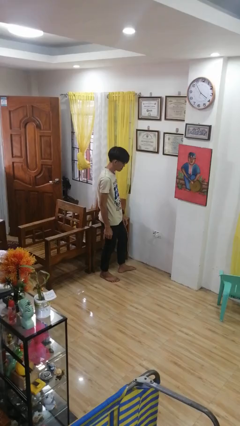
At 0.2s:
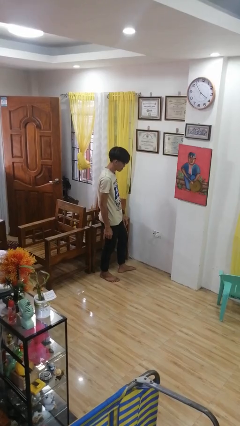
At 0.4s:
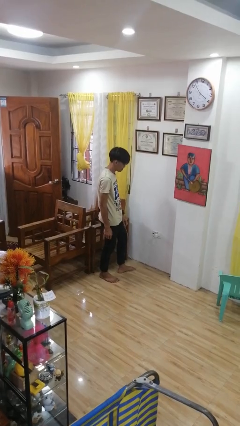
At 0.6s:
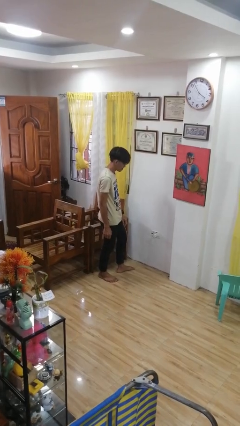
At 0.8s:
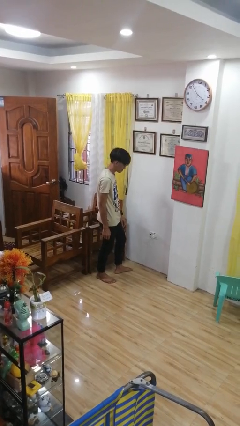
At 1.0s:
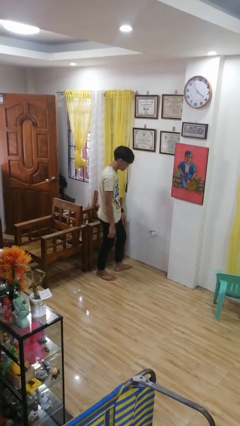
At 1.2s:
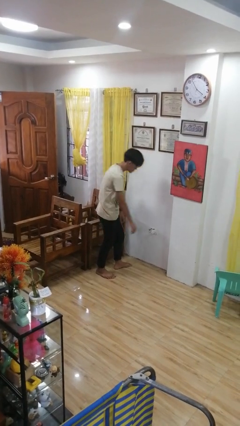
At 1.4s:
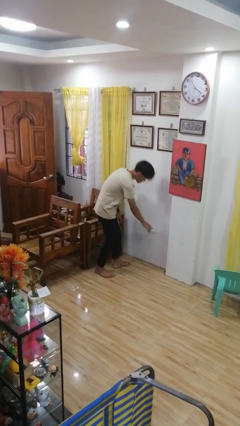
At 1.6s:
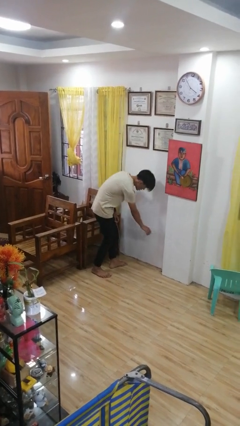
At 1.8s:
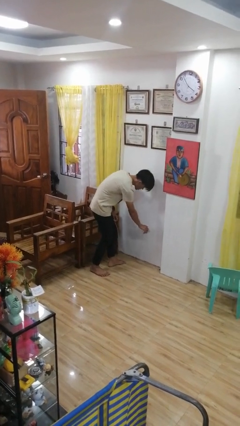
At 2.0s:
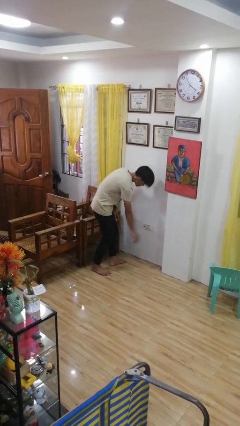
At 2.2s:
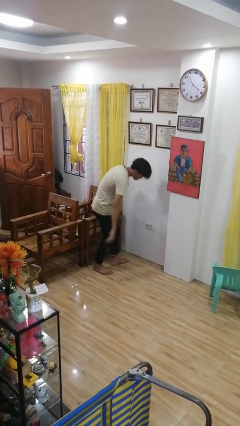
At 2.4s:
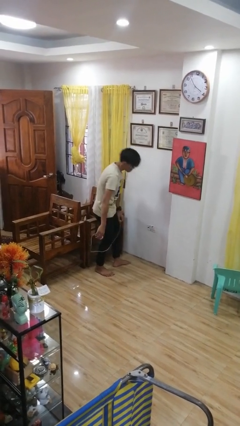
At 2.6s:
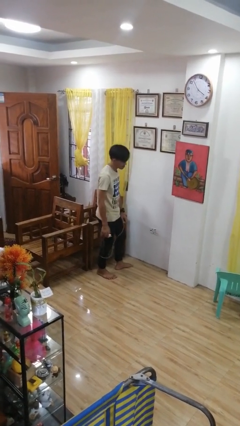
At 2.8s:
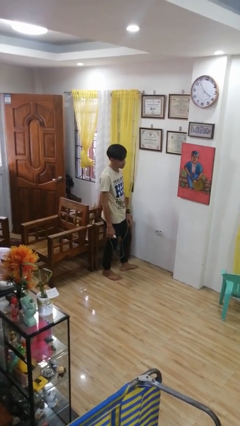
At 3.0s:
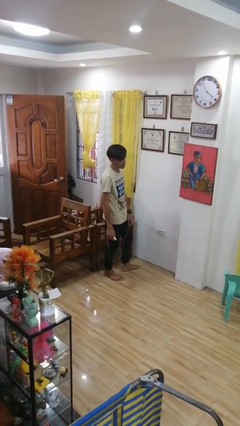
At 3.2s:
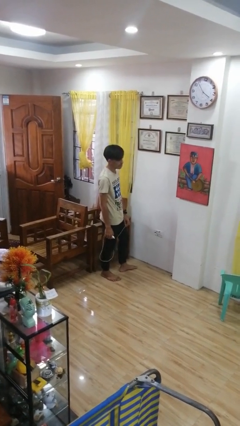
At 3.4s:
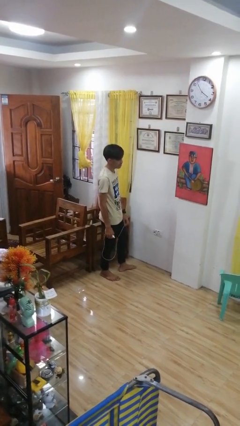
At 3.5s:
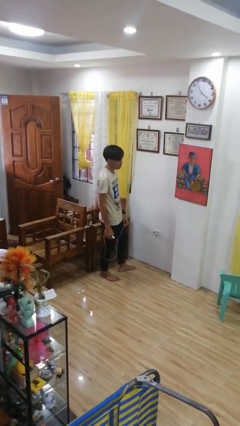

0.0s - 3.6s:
person unplugs from electrical socket

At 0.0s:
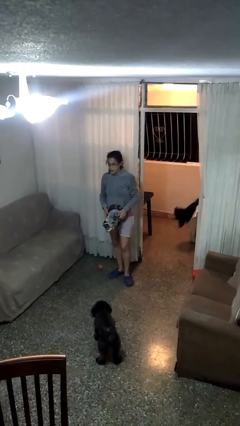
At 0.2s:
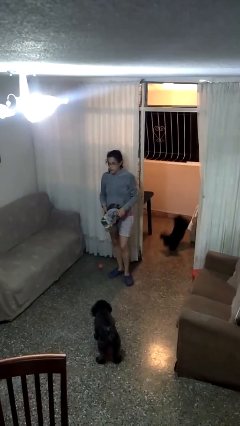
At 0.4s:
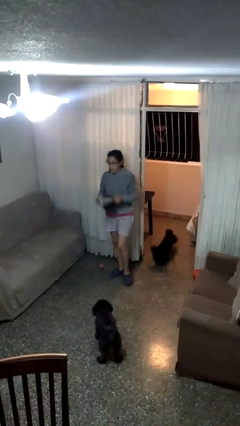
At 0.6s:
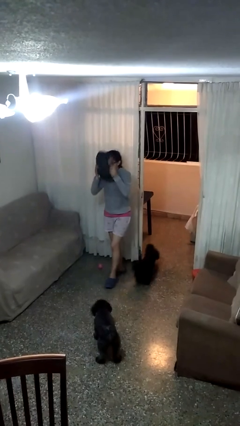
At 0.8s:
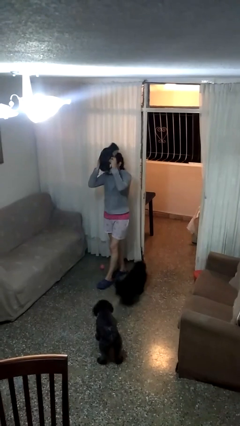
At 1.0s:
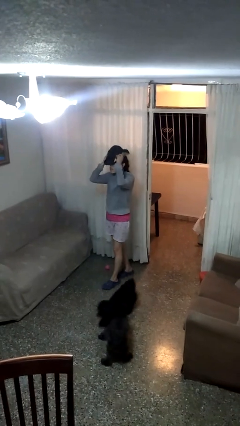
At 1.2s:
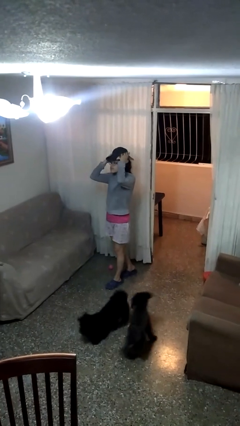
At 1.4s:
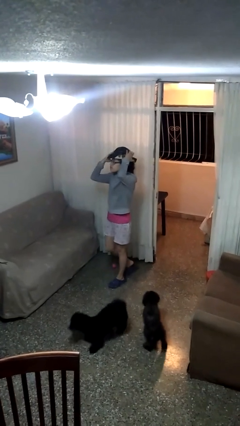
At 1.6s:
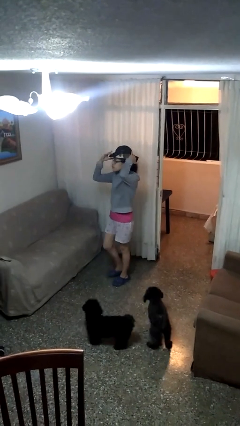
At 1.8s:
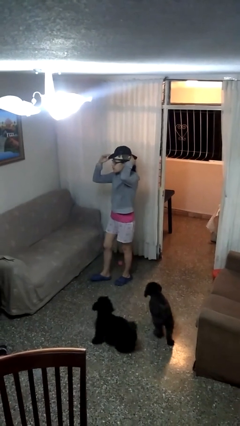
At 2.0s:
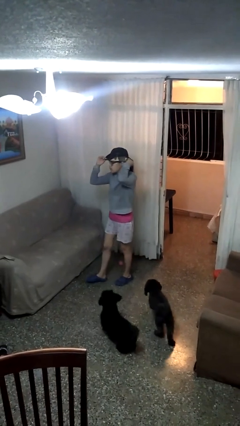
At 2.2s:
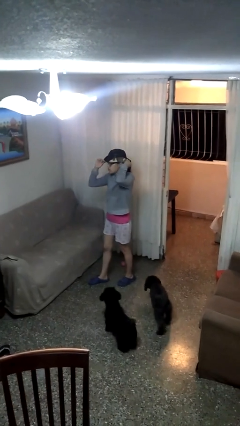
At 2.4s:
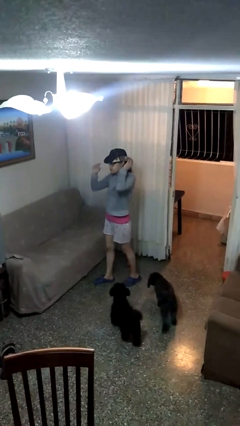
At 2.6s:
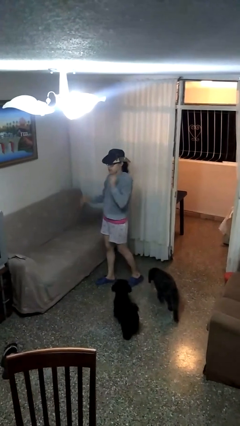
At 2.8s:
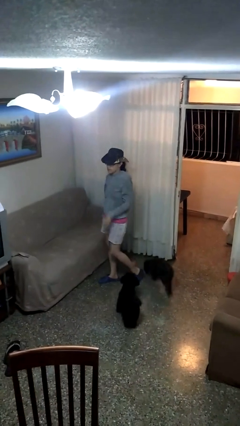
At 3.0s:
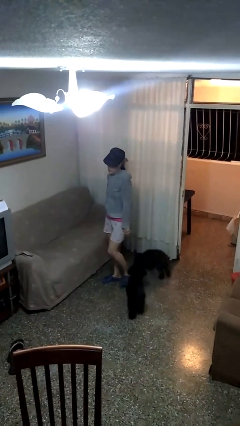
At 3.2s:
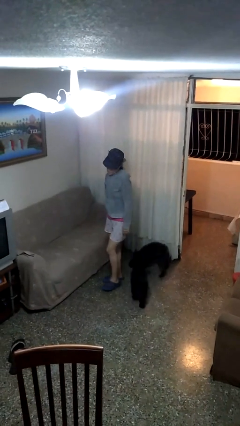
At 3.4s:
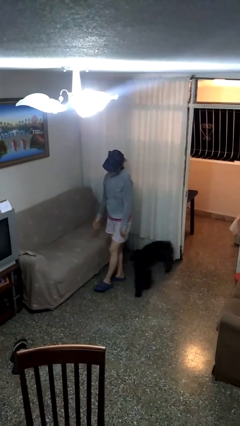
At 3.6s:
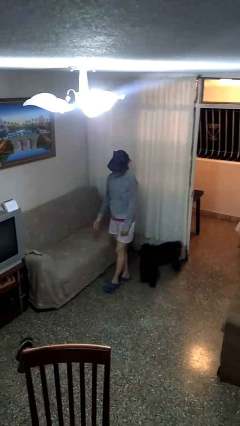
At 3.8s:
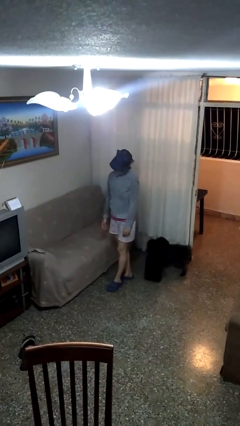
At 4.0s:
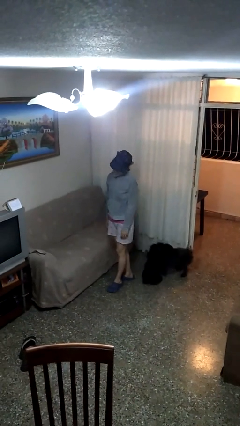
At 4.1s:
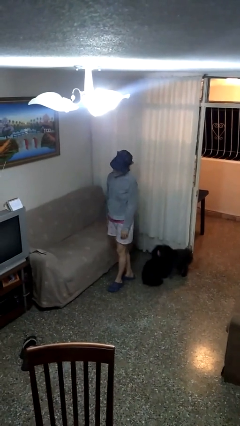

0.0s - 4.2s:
person puts on hat

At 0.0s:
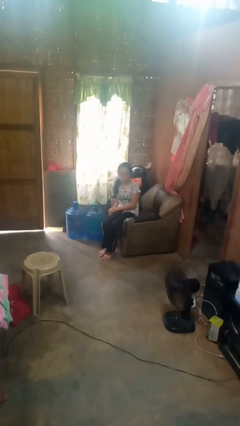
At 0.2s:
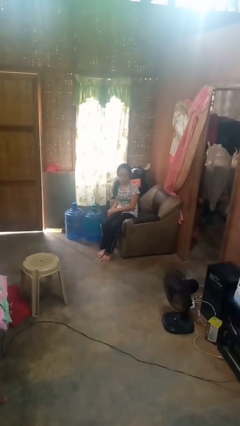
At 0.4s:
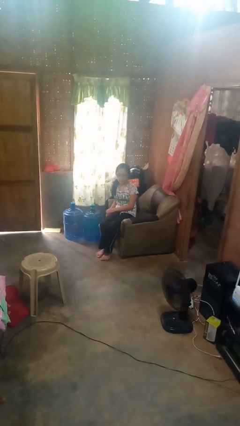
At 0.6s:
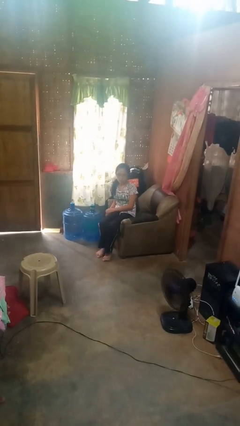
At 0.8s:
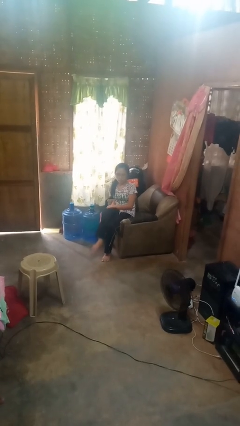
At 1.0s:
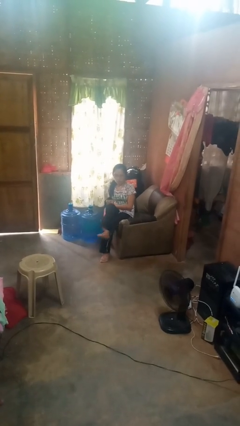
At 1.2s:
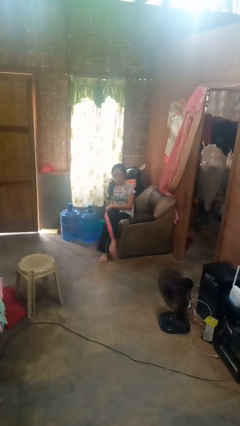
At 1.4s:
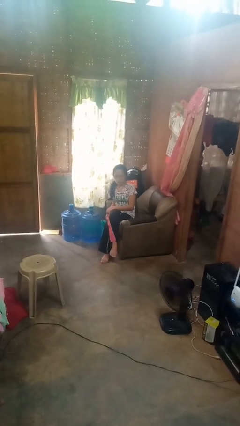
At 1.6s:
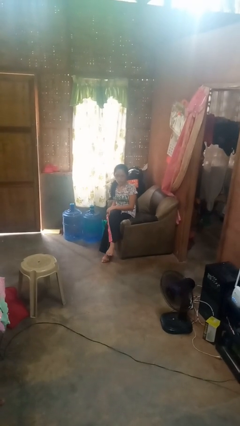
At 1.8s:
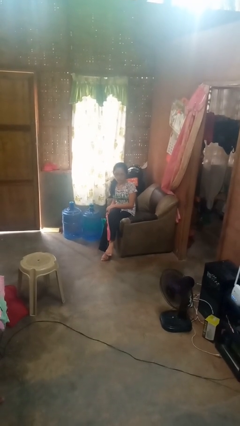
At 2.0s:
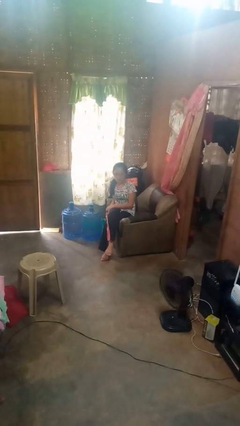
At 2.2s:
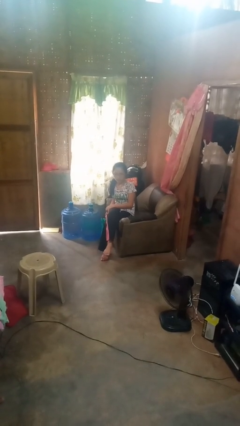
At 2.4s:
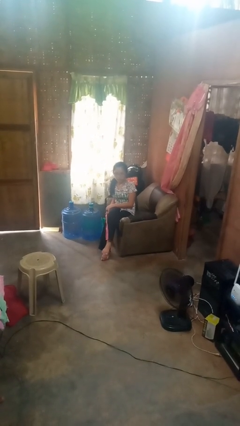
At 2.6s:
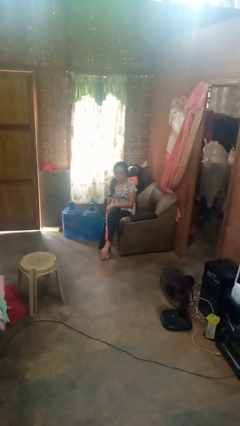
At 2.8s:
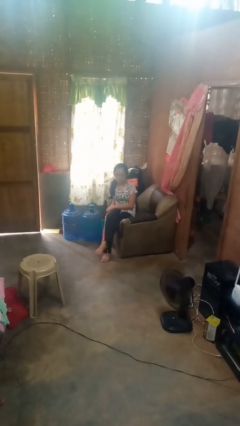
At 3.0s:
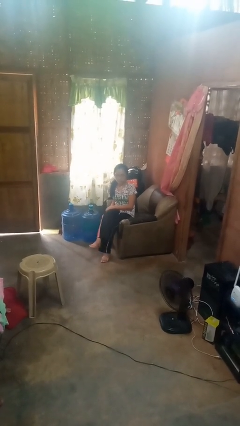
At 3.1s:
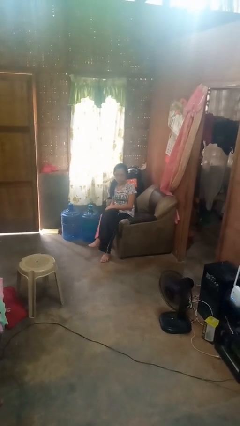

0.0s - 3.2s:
person crosses legs

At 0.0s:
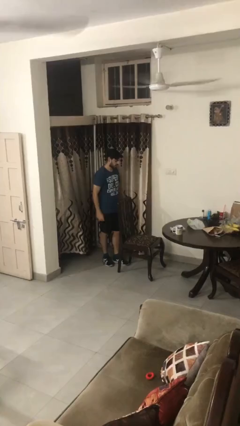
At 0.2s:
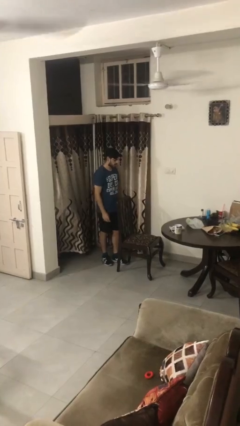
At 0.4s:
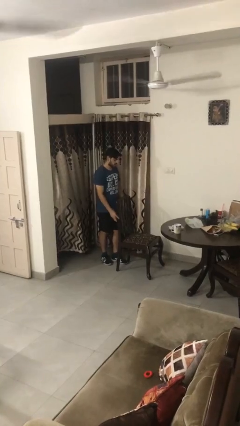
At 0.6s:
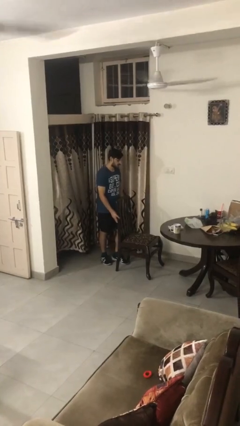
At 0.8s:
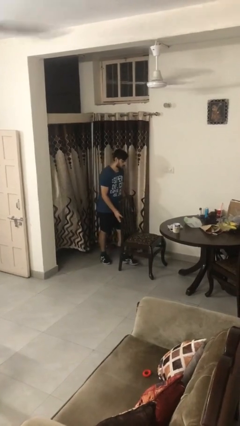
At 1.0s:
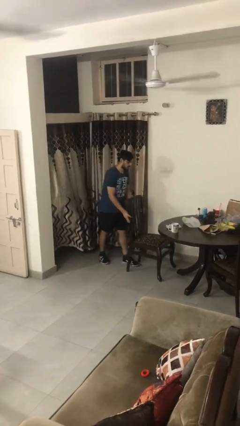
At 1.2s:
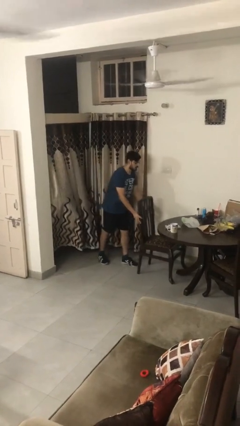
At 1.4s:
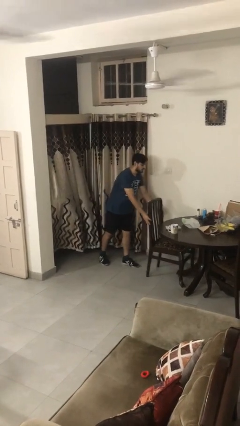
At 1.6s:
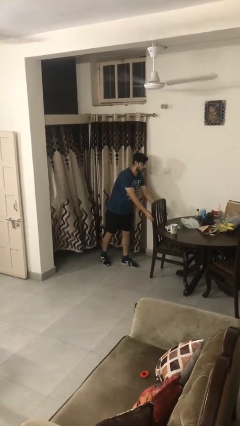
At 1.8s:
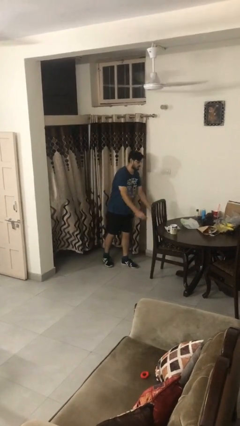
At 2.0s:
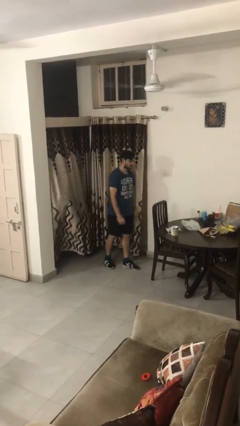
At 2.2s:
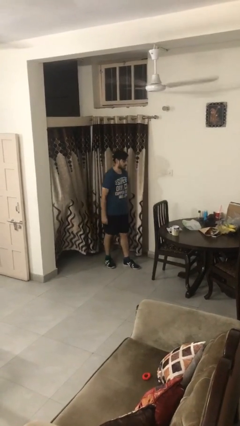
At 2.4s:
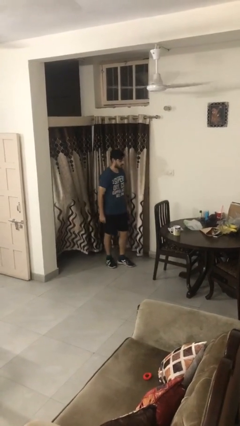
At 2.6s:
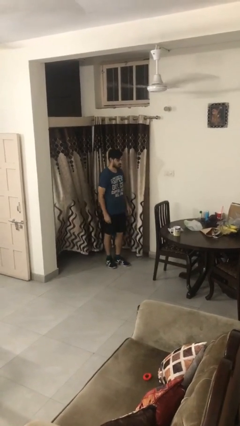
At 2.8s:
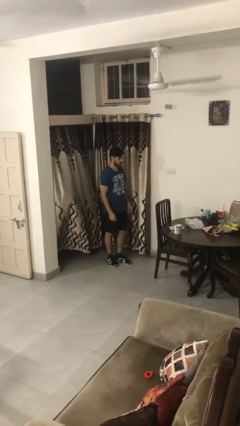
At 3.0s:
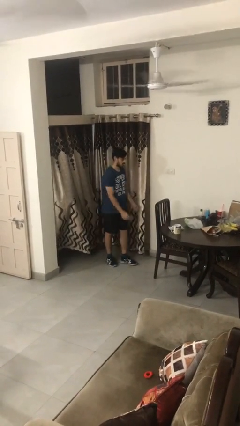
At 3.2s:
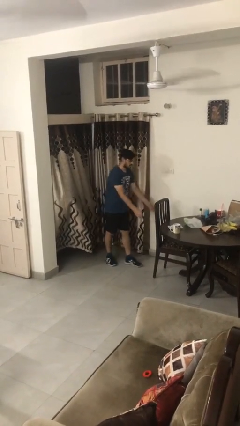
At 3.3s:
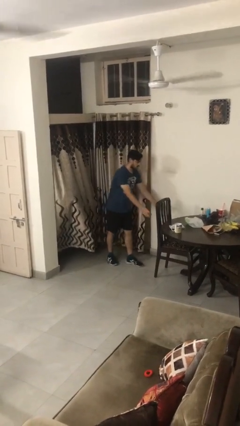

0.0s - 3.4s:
person pushes in chair

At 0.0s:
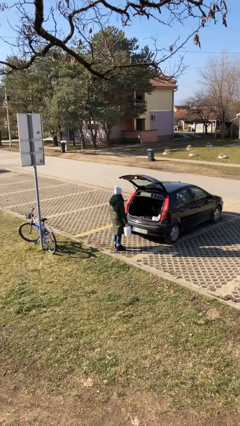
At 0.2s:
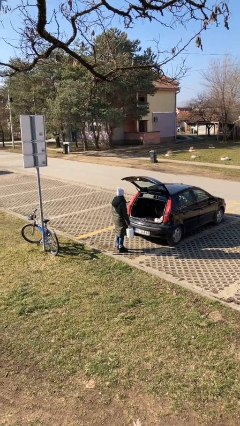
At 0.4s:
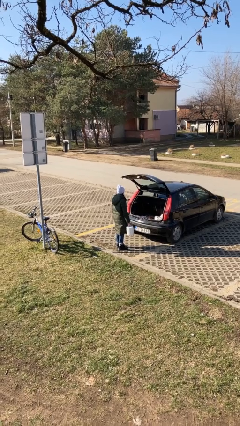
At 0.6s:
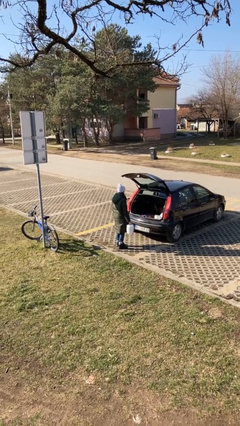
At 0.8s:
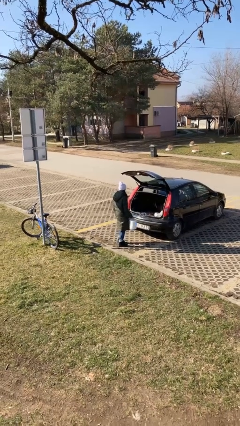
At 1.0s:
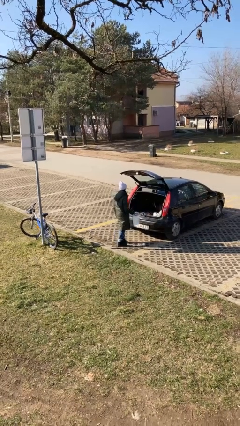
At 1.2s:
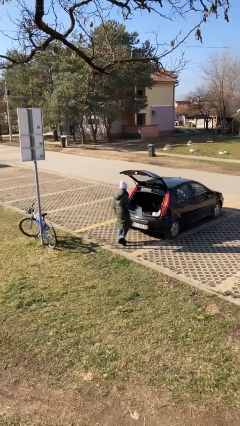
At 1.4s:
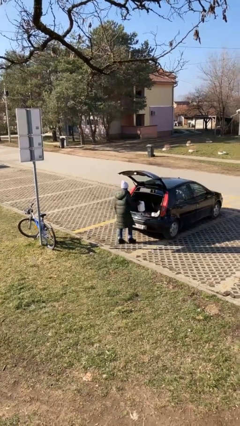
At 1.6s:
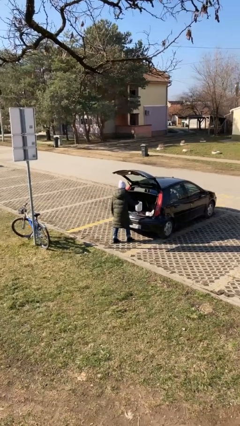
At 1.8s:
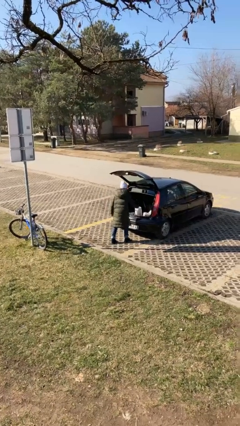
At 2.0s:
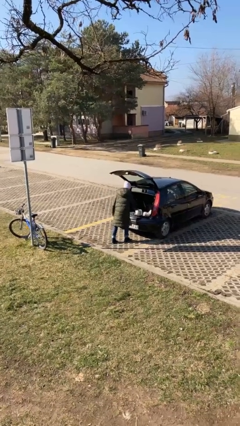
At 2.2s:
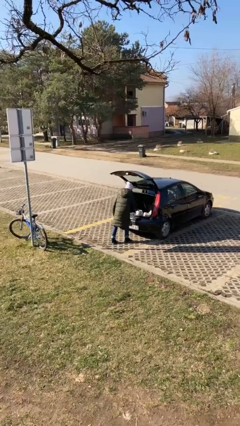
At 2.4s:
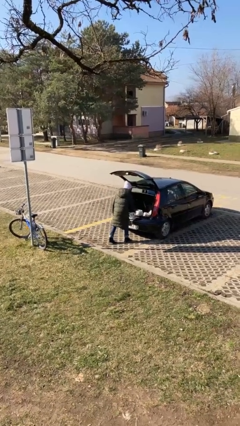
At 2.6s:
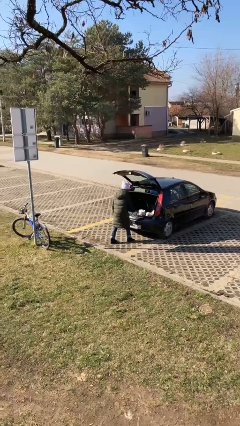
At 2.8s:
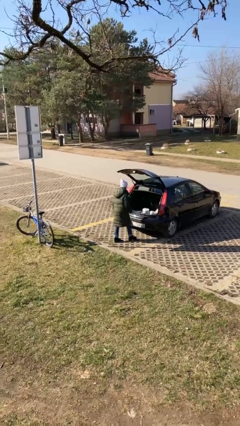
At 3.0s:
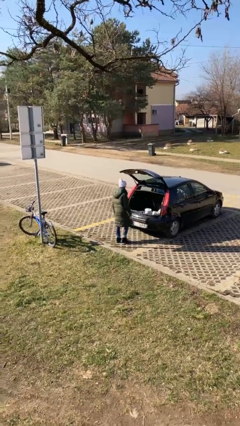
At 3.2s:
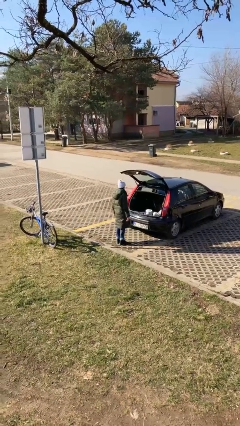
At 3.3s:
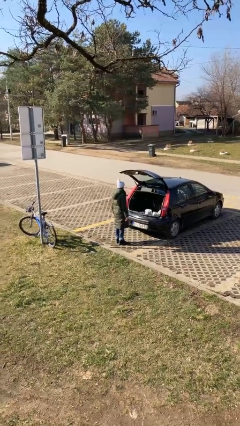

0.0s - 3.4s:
person loads car

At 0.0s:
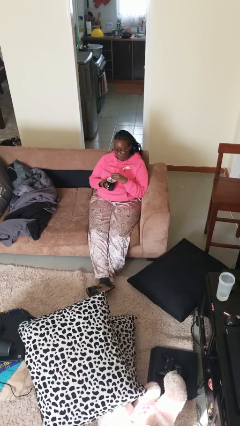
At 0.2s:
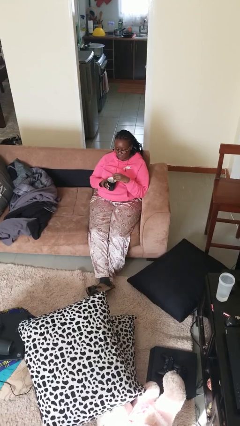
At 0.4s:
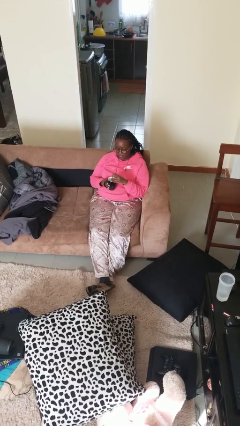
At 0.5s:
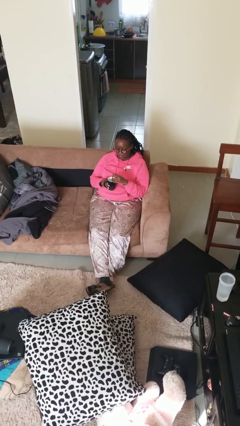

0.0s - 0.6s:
person drinks from mug
